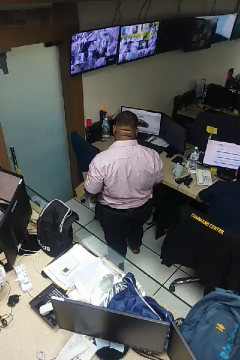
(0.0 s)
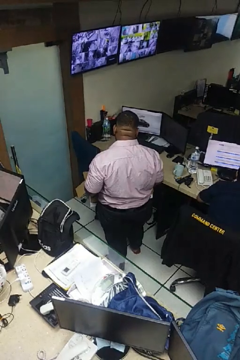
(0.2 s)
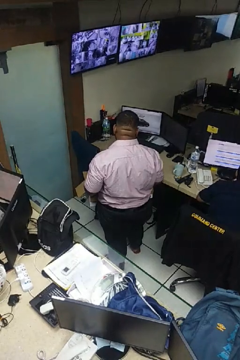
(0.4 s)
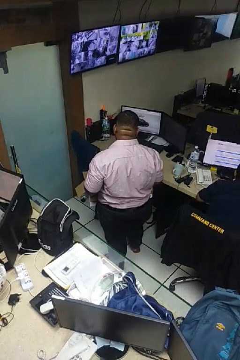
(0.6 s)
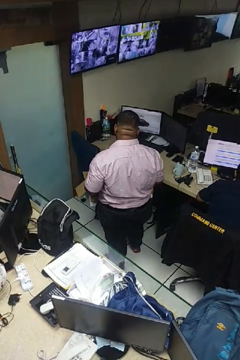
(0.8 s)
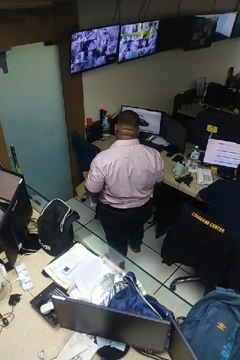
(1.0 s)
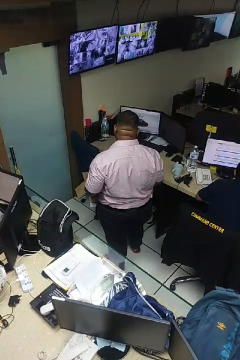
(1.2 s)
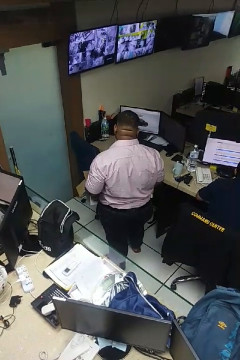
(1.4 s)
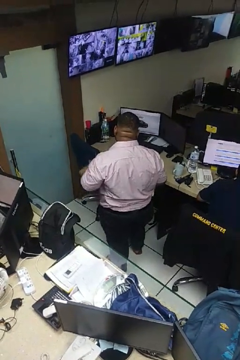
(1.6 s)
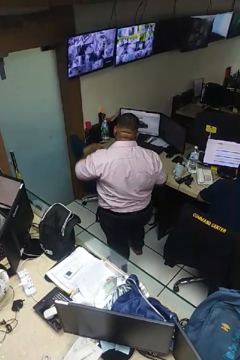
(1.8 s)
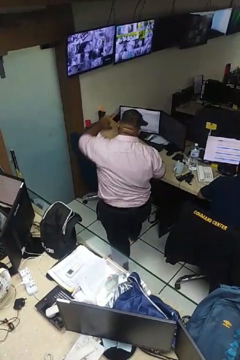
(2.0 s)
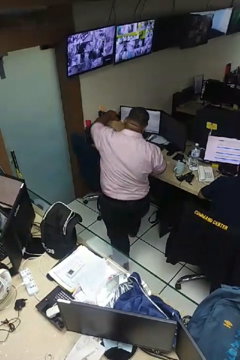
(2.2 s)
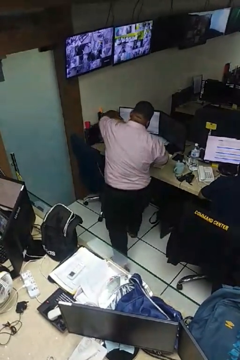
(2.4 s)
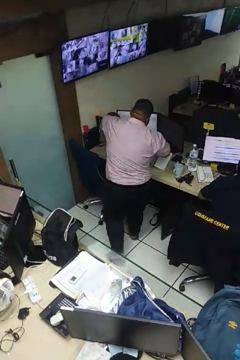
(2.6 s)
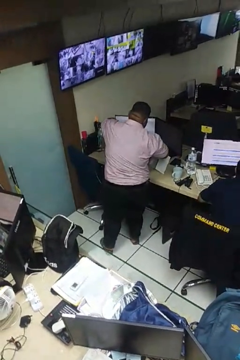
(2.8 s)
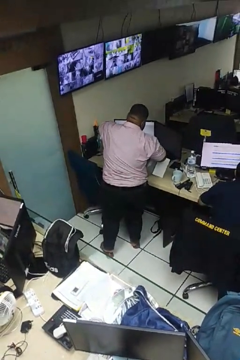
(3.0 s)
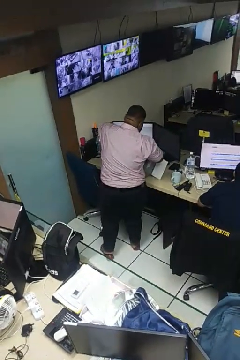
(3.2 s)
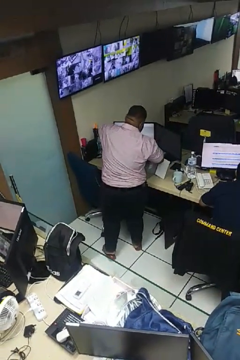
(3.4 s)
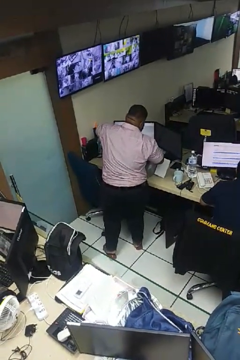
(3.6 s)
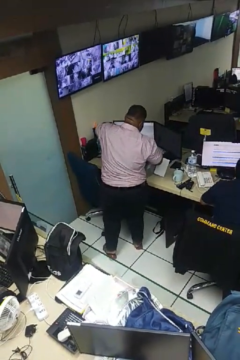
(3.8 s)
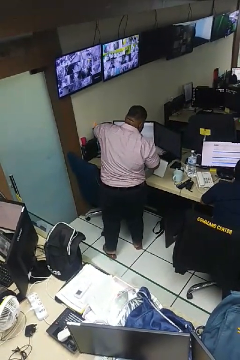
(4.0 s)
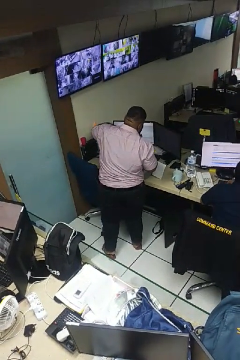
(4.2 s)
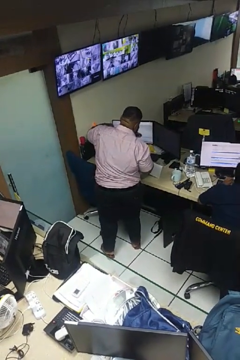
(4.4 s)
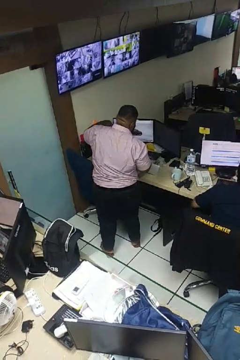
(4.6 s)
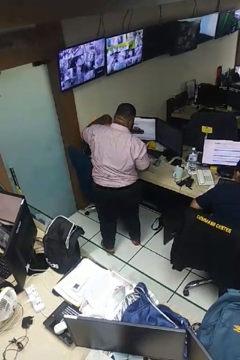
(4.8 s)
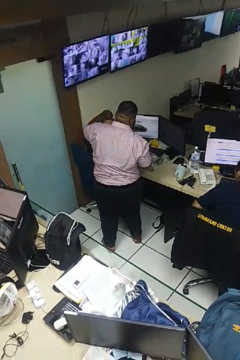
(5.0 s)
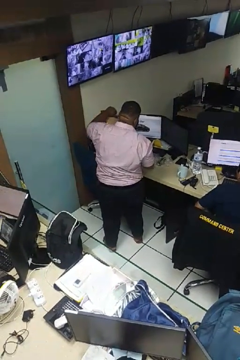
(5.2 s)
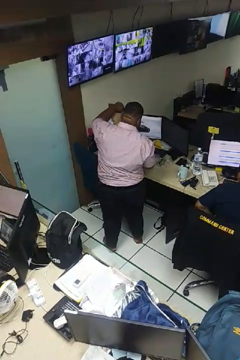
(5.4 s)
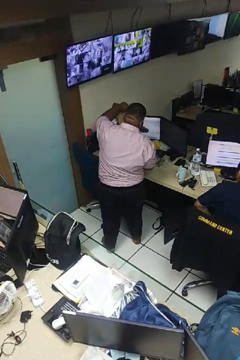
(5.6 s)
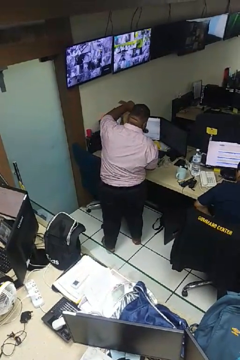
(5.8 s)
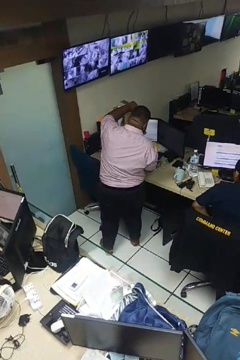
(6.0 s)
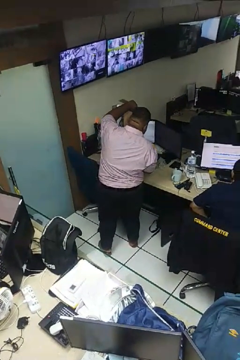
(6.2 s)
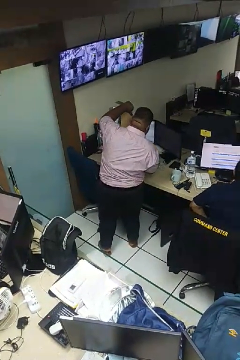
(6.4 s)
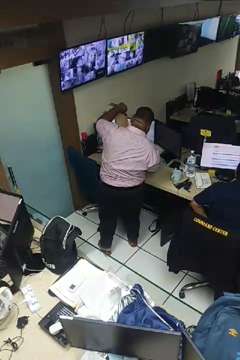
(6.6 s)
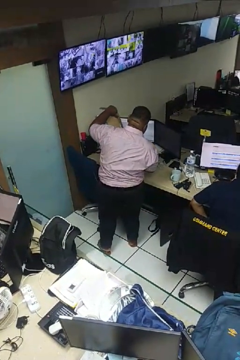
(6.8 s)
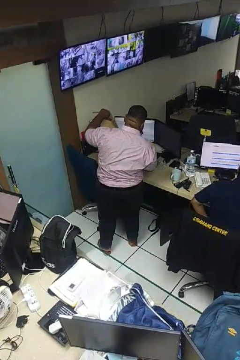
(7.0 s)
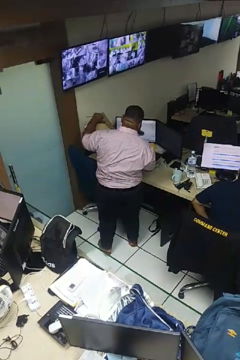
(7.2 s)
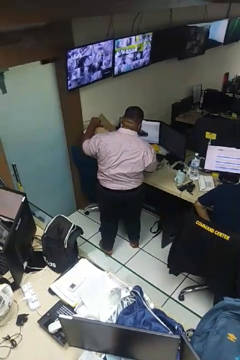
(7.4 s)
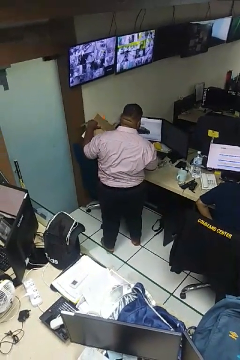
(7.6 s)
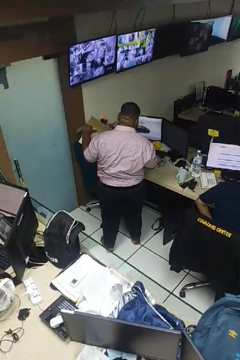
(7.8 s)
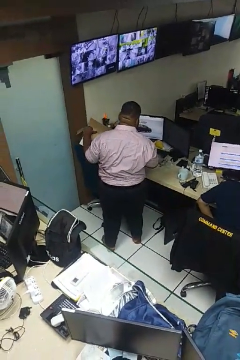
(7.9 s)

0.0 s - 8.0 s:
person unloads box onto table

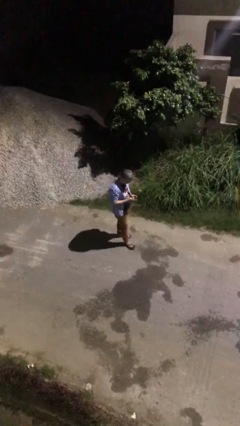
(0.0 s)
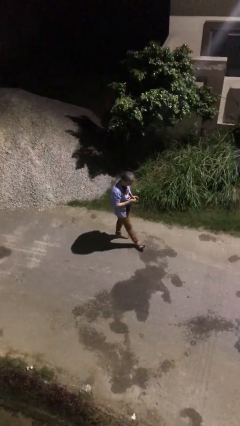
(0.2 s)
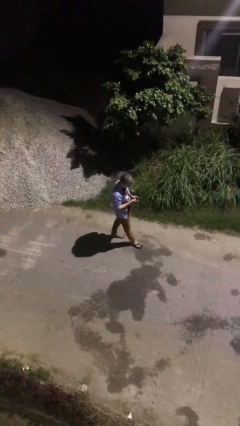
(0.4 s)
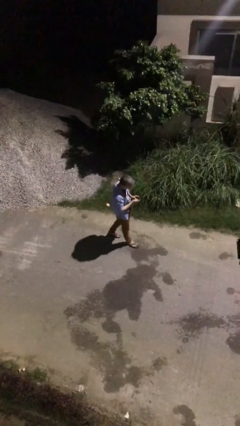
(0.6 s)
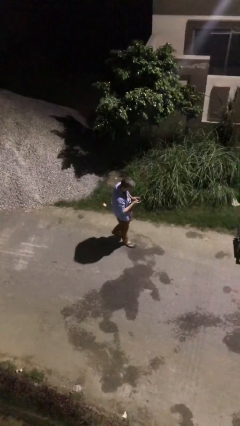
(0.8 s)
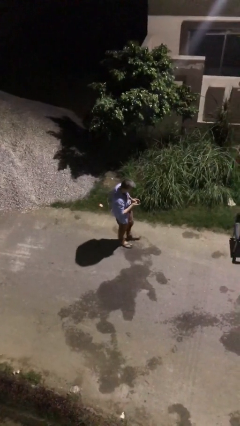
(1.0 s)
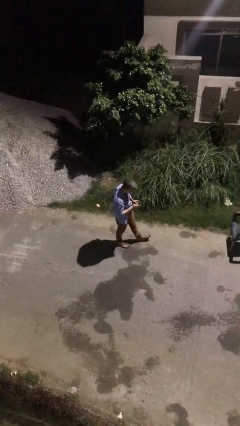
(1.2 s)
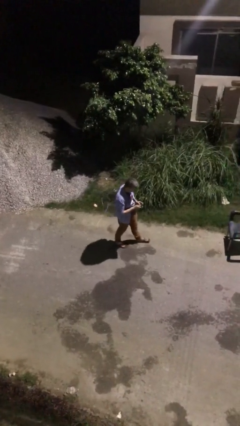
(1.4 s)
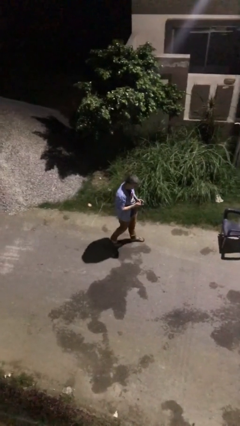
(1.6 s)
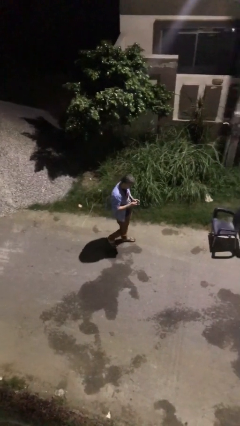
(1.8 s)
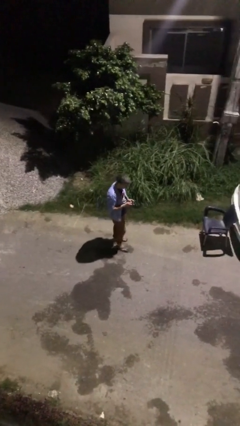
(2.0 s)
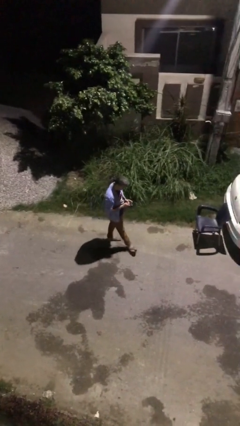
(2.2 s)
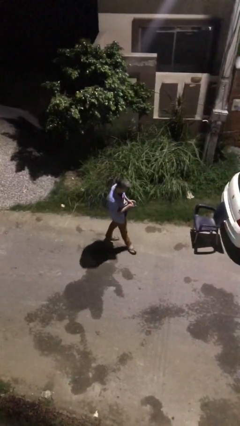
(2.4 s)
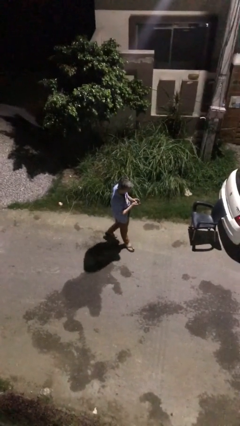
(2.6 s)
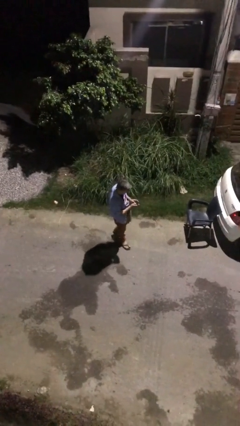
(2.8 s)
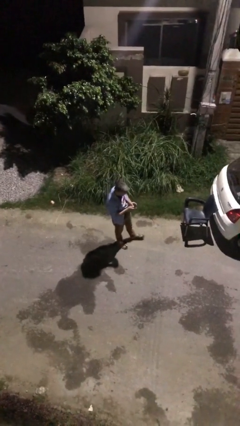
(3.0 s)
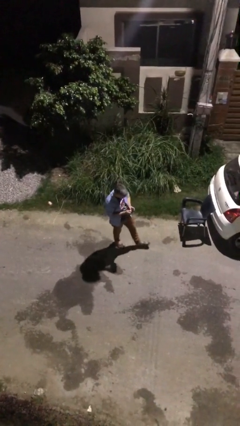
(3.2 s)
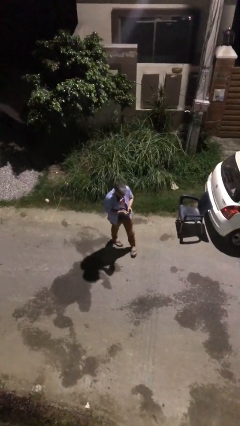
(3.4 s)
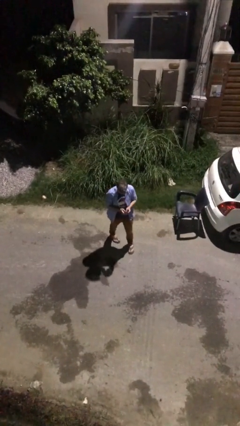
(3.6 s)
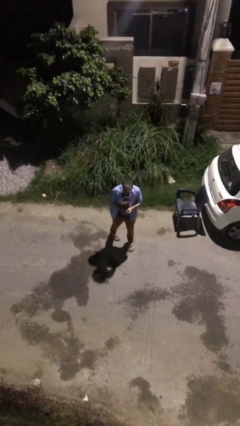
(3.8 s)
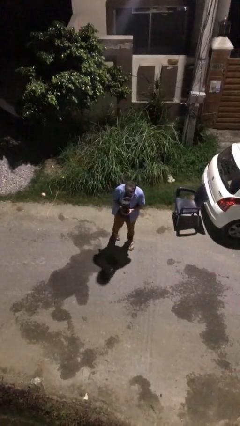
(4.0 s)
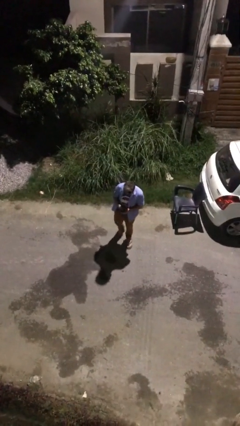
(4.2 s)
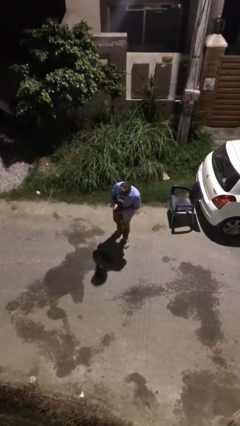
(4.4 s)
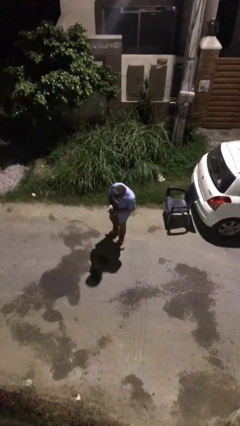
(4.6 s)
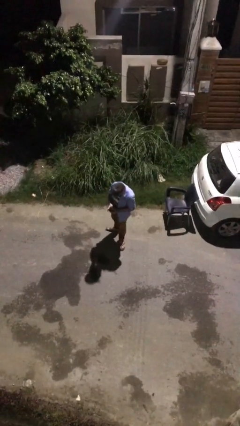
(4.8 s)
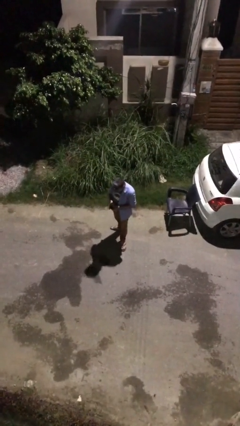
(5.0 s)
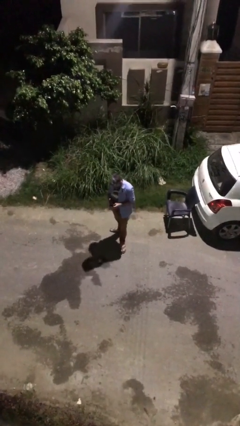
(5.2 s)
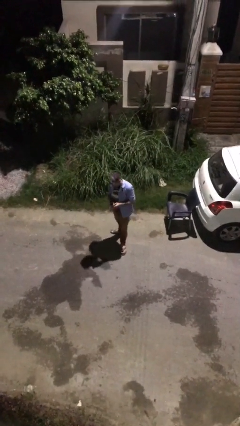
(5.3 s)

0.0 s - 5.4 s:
person texts on phone

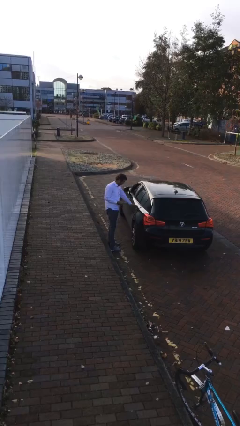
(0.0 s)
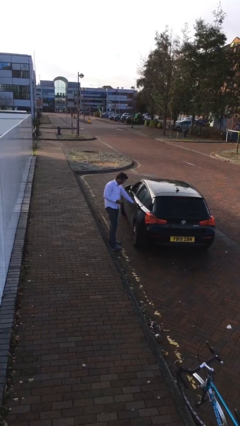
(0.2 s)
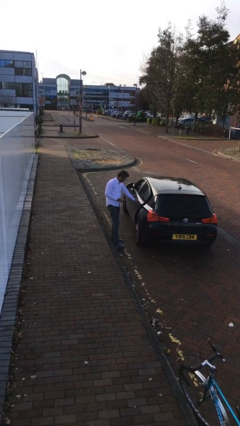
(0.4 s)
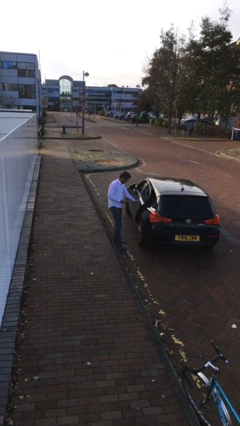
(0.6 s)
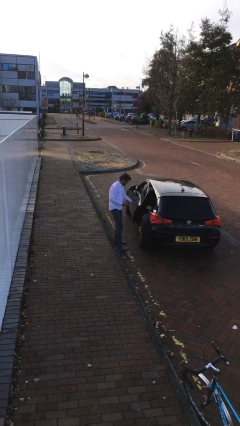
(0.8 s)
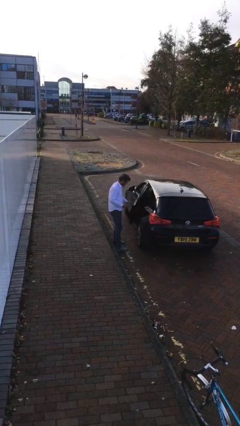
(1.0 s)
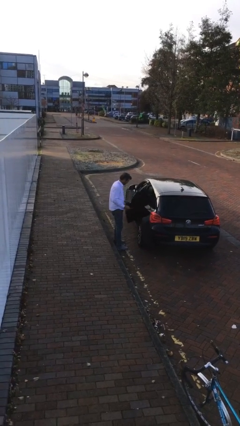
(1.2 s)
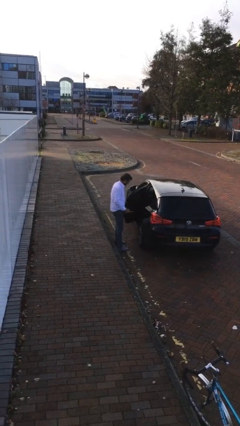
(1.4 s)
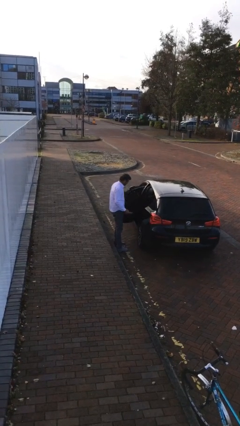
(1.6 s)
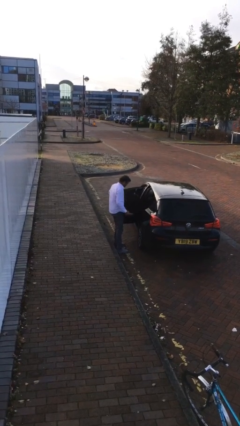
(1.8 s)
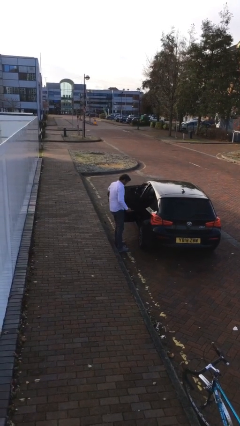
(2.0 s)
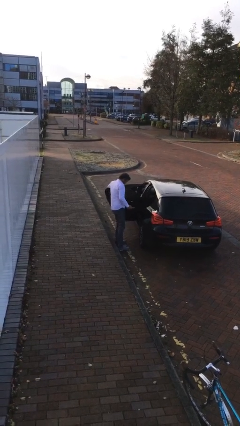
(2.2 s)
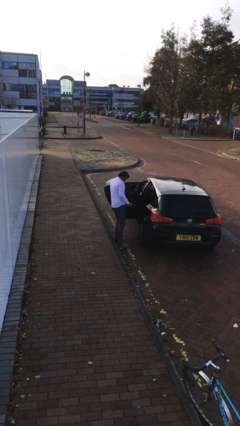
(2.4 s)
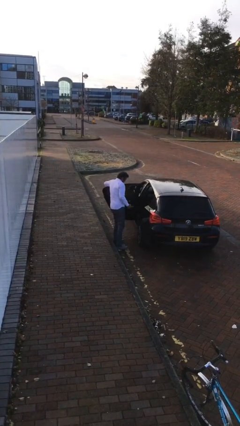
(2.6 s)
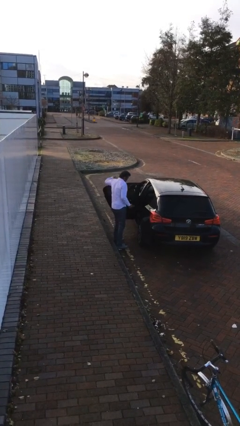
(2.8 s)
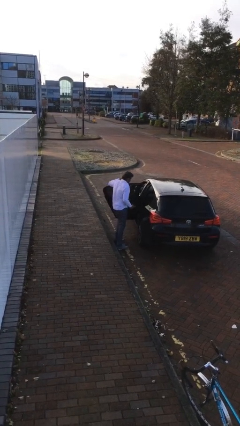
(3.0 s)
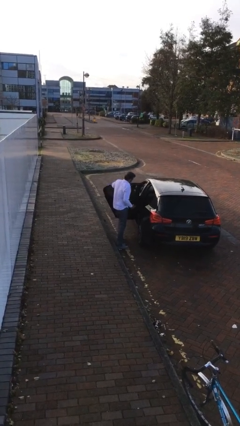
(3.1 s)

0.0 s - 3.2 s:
person opens car door

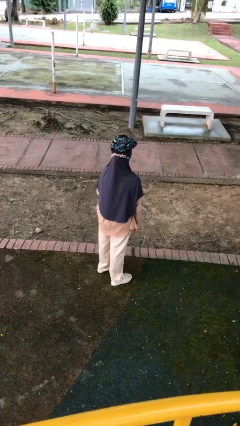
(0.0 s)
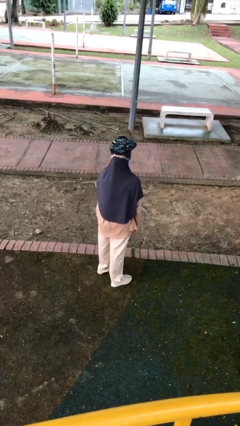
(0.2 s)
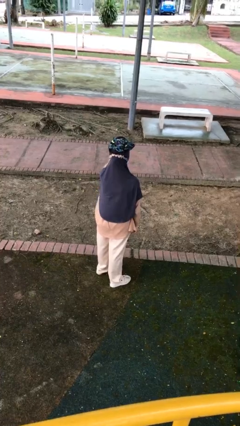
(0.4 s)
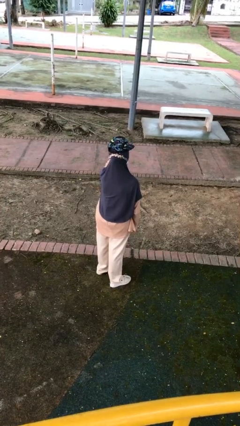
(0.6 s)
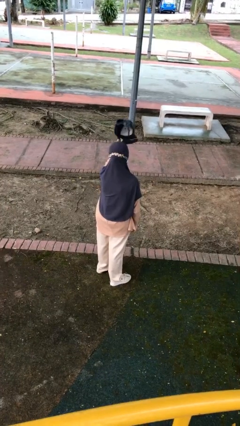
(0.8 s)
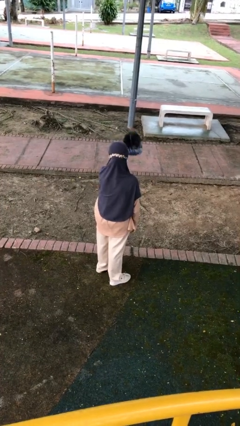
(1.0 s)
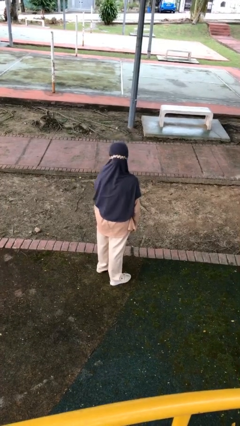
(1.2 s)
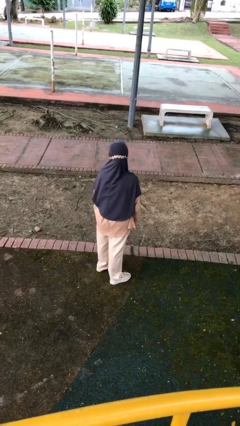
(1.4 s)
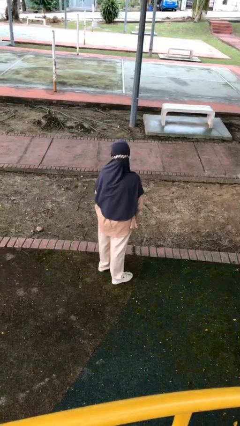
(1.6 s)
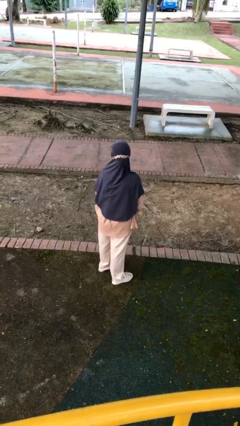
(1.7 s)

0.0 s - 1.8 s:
person takes off hat

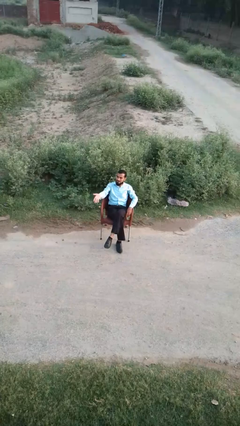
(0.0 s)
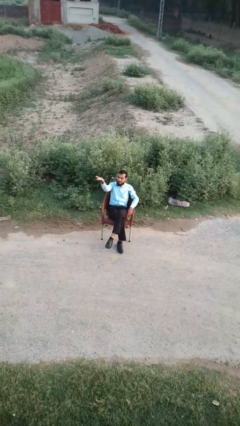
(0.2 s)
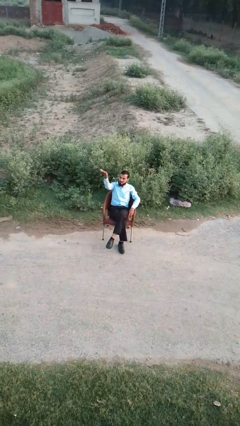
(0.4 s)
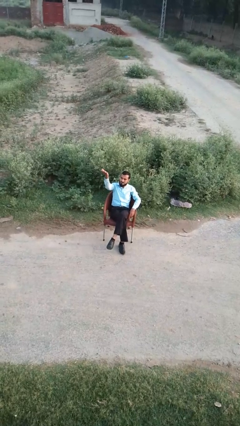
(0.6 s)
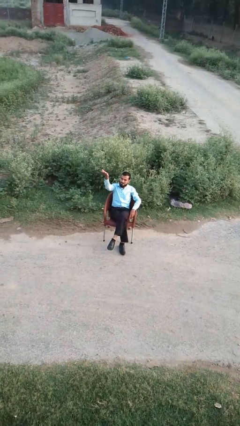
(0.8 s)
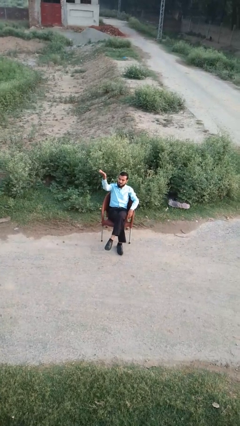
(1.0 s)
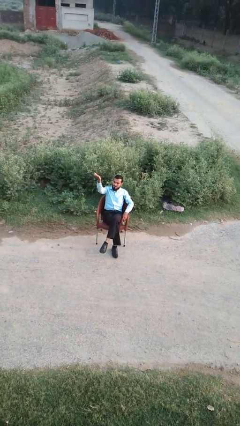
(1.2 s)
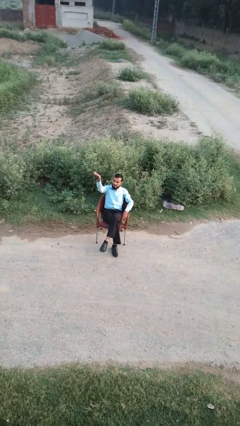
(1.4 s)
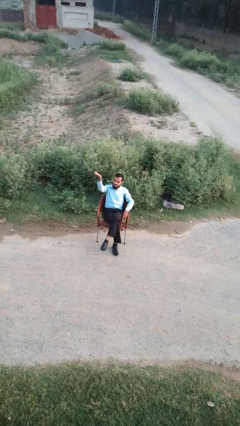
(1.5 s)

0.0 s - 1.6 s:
person gestures swipe up
